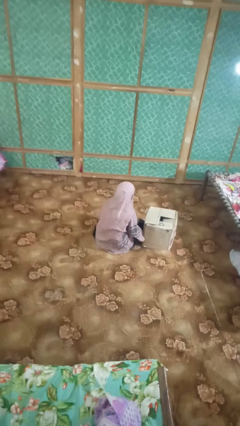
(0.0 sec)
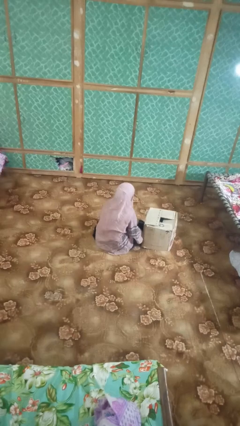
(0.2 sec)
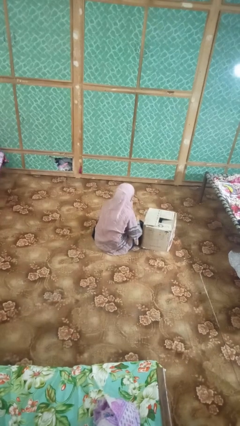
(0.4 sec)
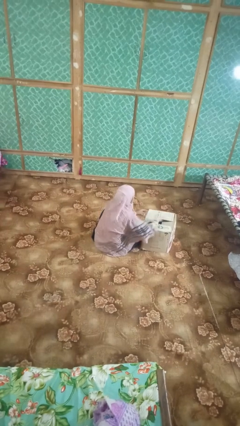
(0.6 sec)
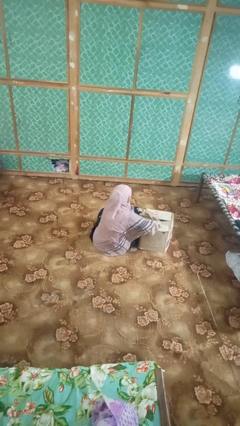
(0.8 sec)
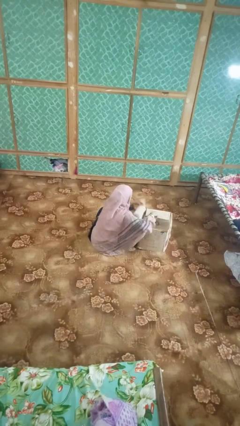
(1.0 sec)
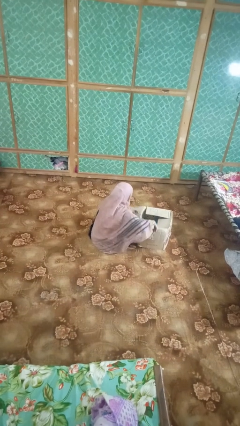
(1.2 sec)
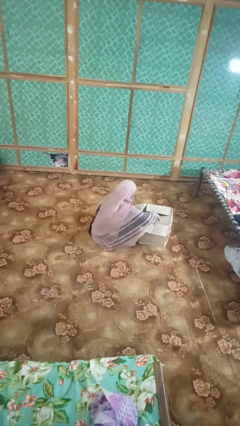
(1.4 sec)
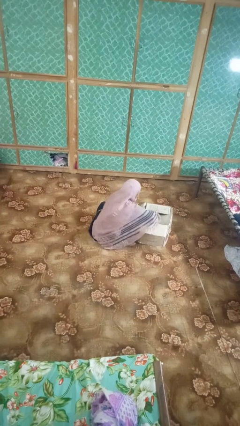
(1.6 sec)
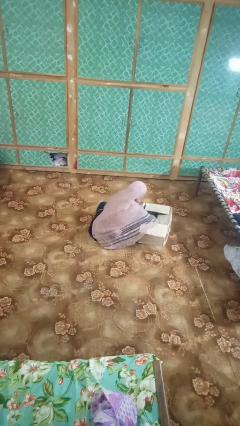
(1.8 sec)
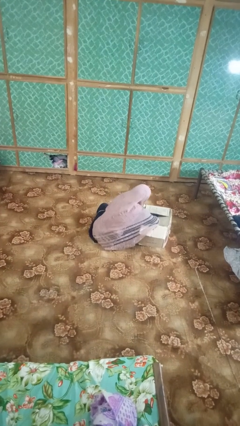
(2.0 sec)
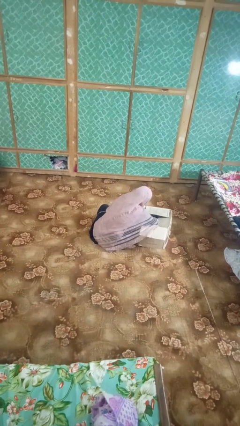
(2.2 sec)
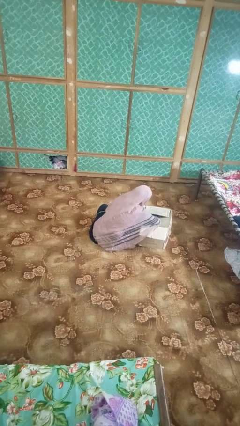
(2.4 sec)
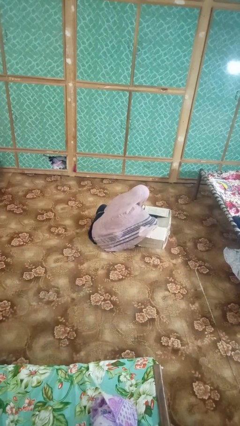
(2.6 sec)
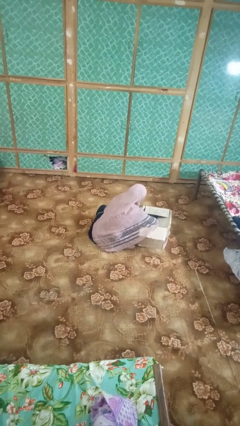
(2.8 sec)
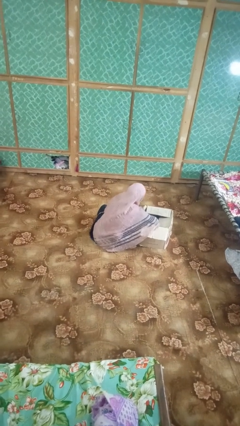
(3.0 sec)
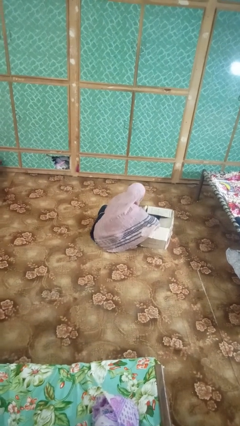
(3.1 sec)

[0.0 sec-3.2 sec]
person searches in box

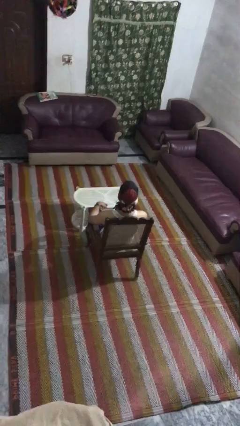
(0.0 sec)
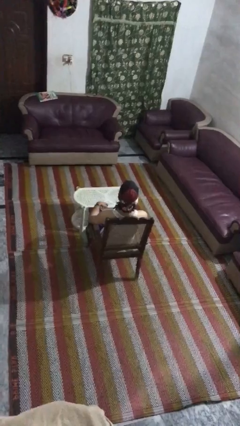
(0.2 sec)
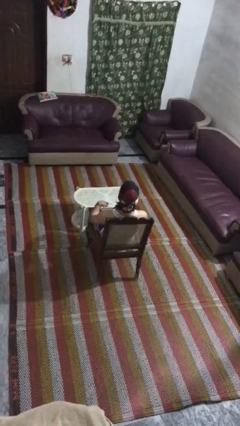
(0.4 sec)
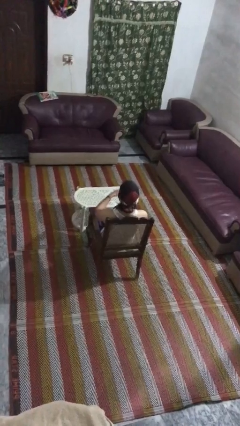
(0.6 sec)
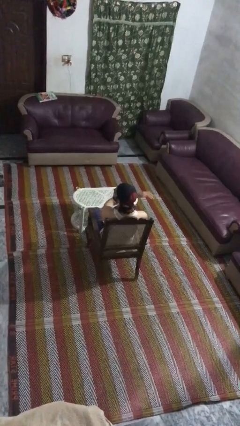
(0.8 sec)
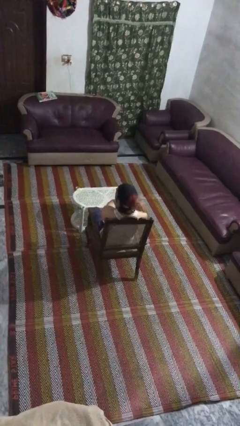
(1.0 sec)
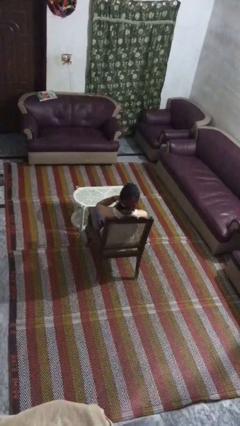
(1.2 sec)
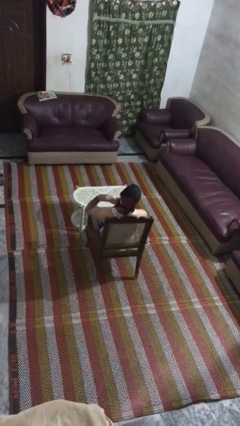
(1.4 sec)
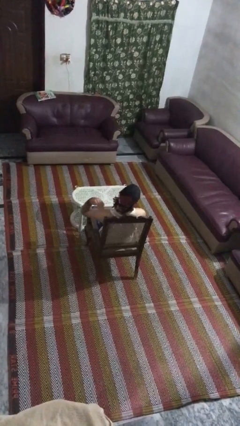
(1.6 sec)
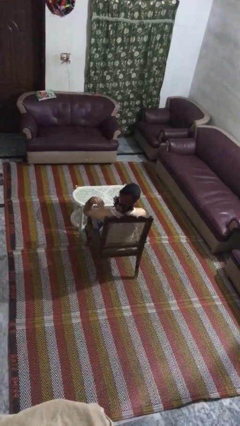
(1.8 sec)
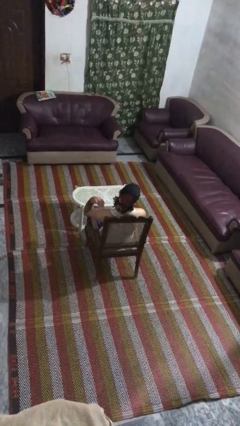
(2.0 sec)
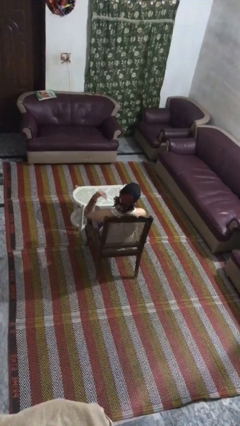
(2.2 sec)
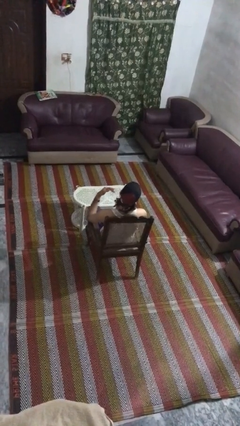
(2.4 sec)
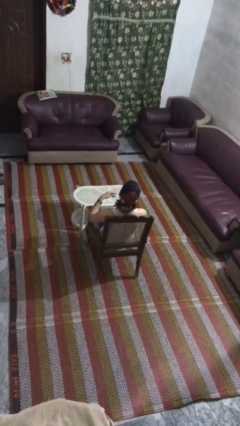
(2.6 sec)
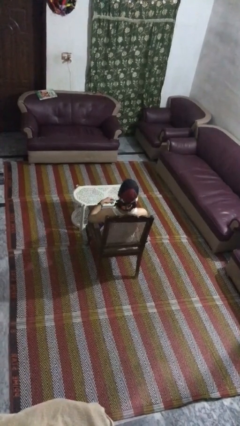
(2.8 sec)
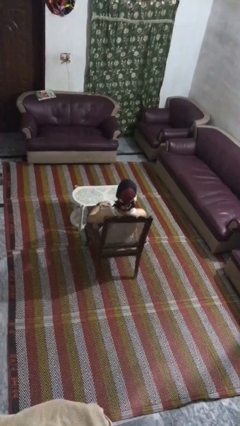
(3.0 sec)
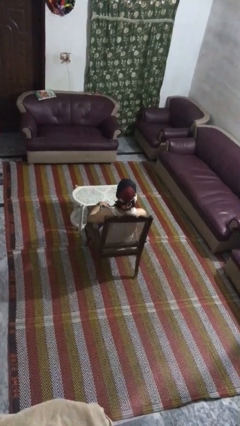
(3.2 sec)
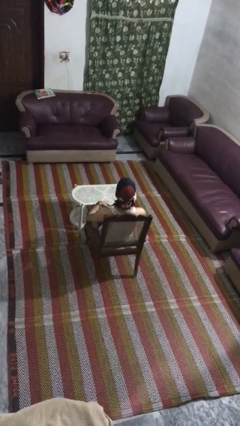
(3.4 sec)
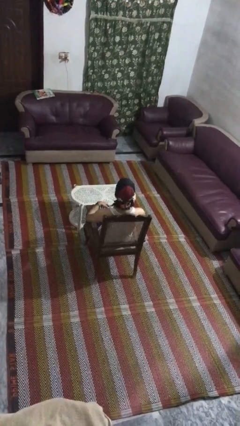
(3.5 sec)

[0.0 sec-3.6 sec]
person gestures cut

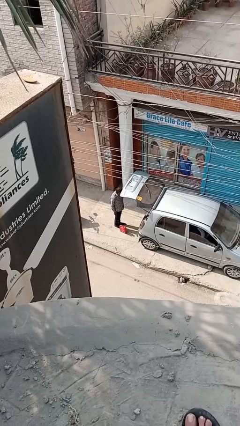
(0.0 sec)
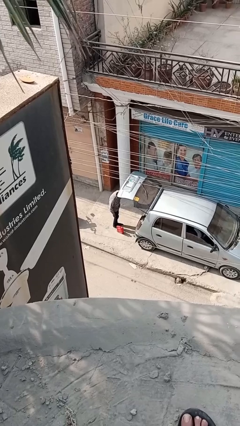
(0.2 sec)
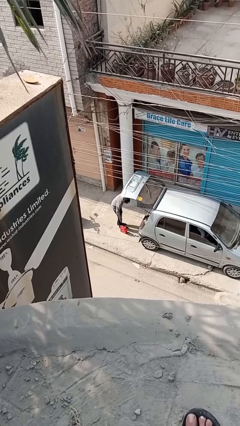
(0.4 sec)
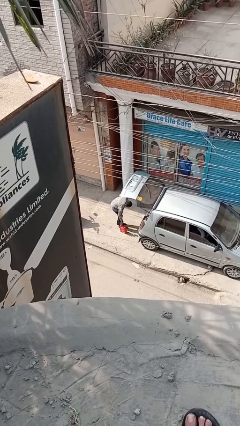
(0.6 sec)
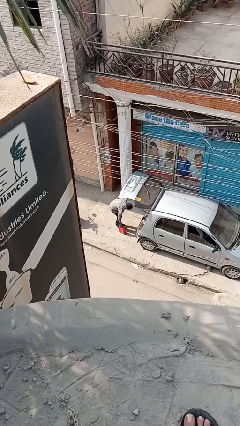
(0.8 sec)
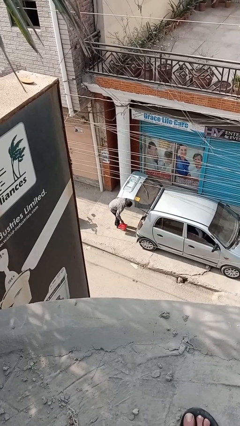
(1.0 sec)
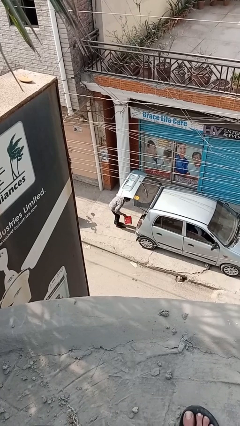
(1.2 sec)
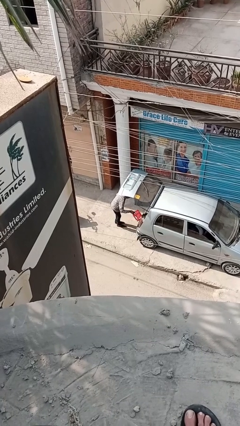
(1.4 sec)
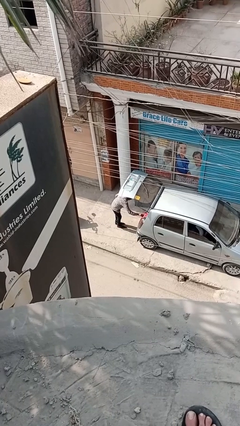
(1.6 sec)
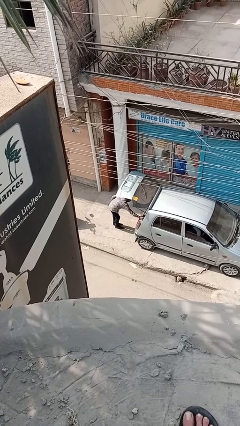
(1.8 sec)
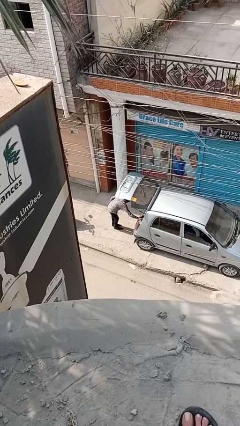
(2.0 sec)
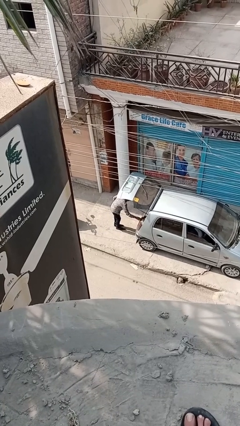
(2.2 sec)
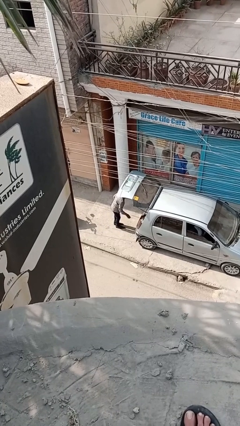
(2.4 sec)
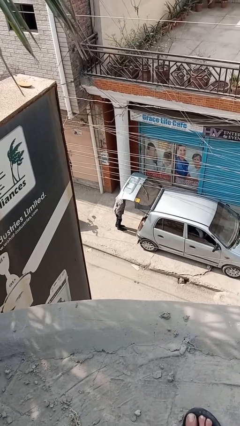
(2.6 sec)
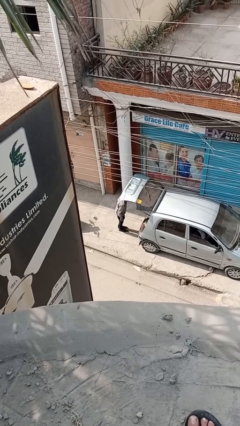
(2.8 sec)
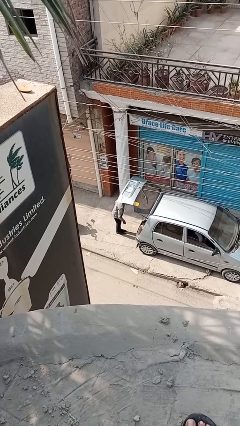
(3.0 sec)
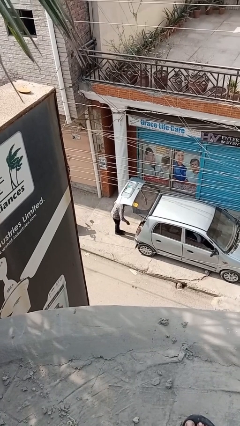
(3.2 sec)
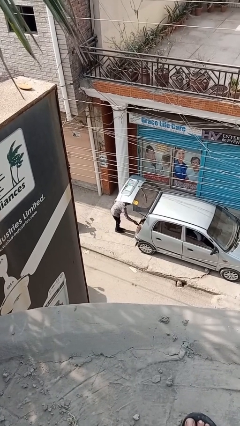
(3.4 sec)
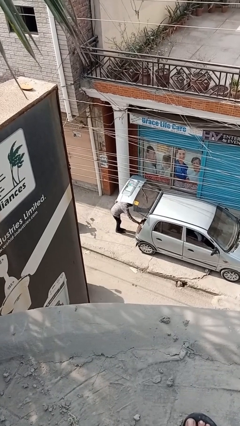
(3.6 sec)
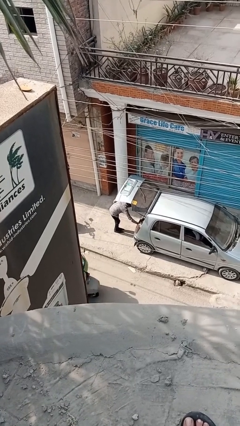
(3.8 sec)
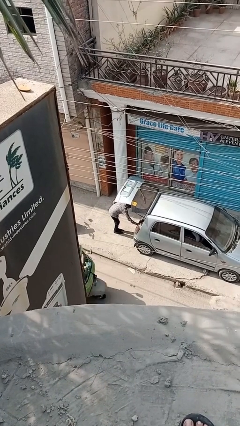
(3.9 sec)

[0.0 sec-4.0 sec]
person loads car

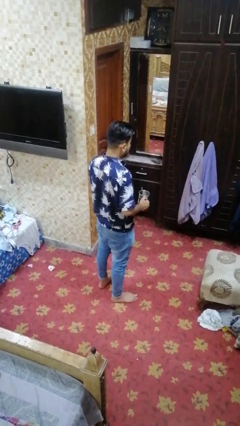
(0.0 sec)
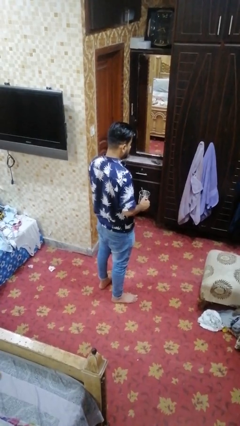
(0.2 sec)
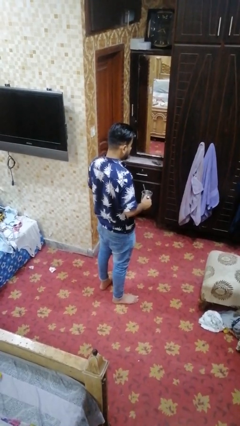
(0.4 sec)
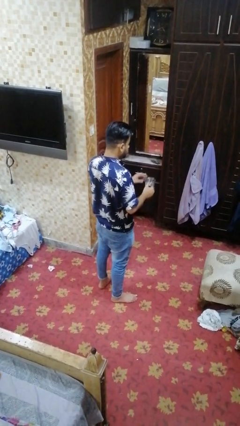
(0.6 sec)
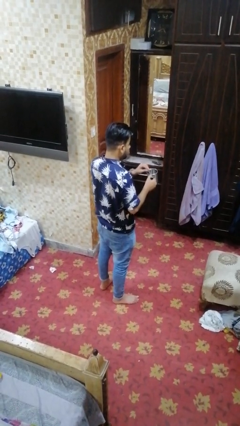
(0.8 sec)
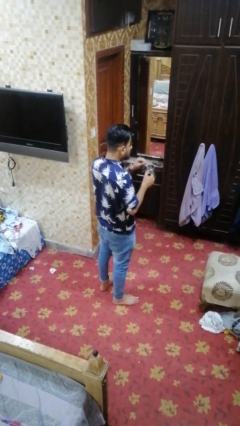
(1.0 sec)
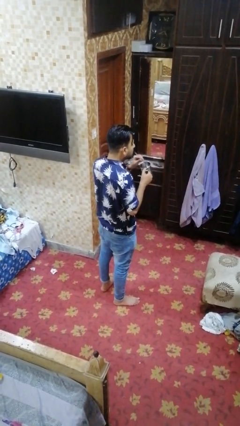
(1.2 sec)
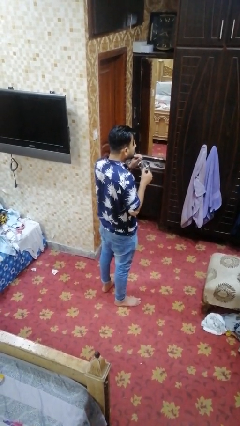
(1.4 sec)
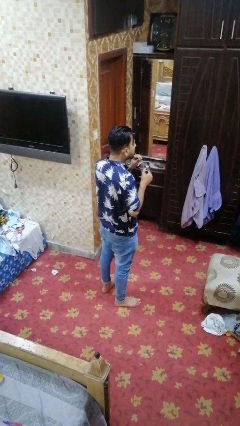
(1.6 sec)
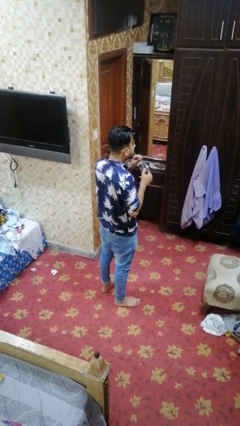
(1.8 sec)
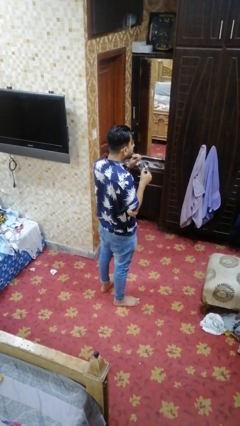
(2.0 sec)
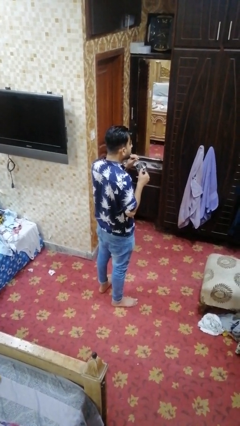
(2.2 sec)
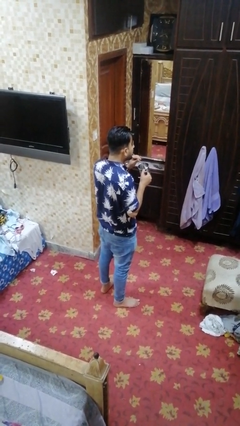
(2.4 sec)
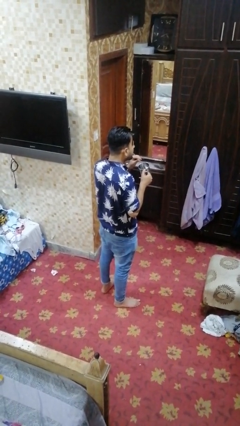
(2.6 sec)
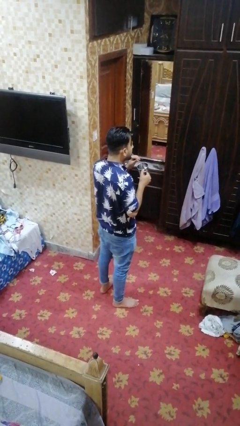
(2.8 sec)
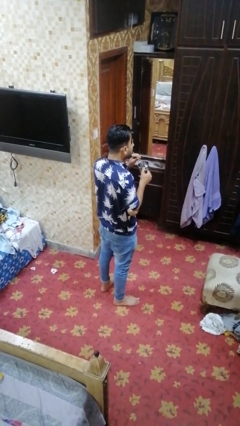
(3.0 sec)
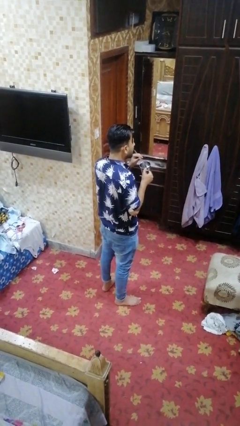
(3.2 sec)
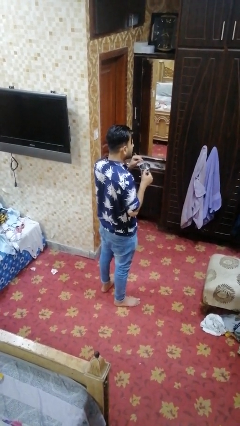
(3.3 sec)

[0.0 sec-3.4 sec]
person drinks from straw

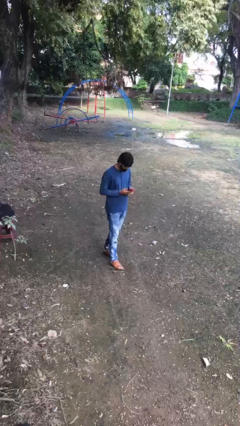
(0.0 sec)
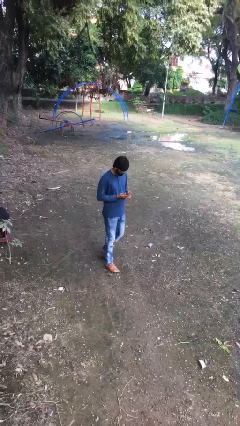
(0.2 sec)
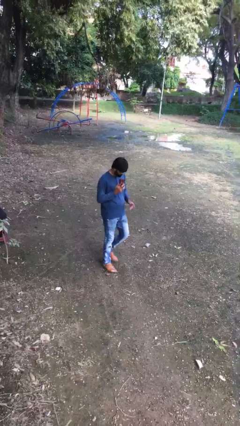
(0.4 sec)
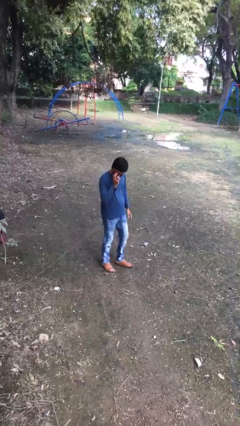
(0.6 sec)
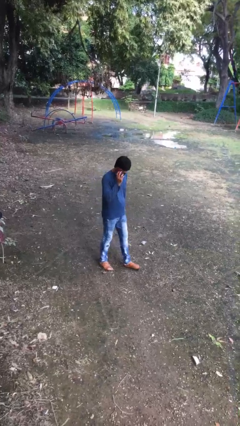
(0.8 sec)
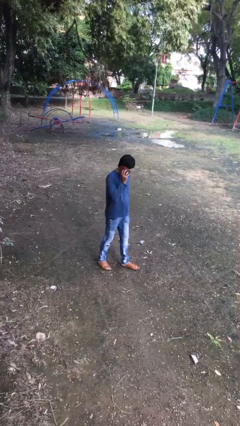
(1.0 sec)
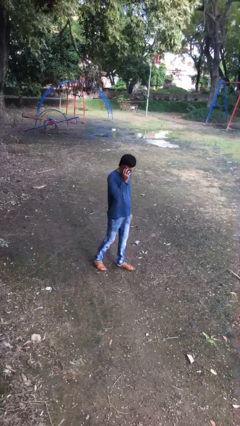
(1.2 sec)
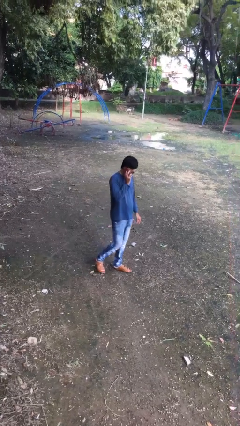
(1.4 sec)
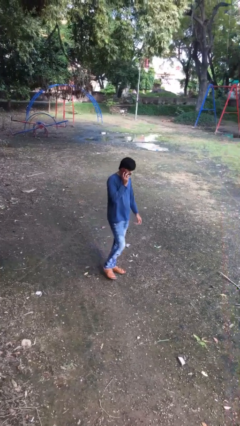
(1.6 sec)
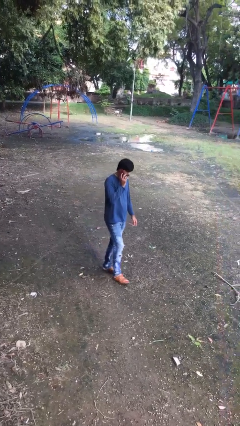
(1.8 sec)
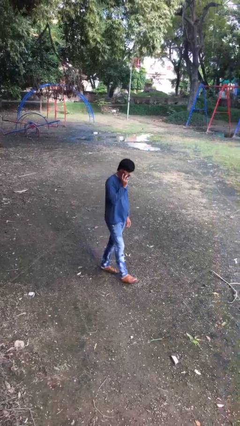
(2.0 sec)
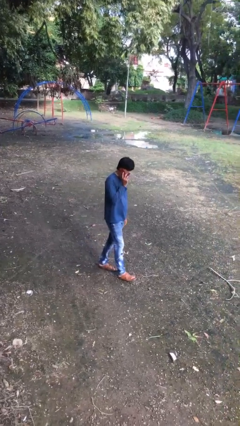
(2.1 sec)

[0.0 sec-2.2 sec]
person talks on phone

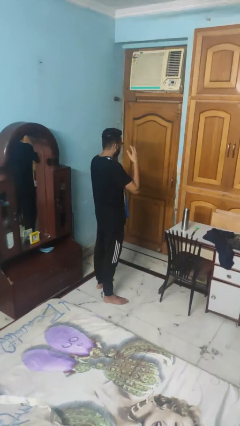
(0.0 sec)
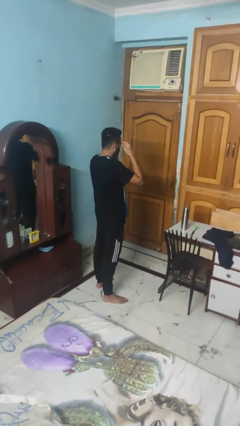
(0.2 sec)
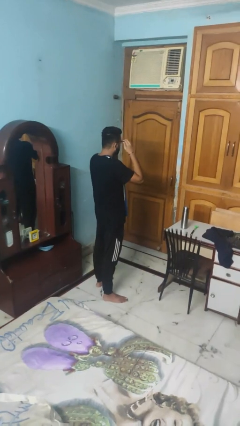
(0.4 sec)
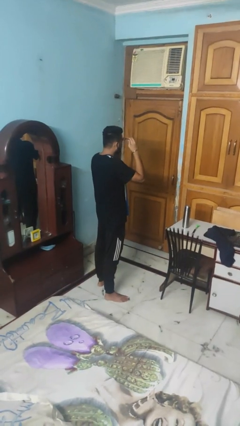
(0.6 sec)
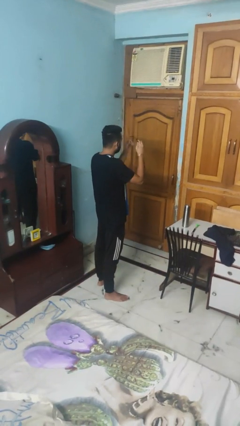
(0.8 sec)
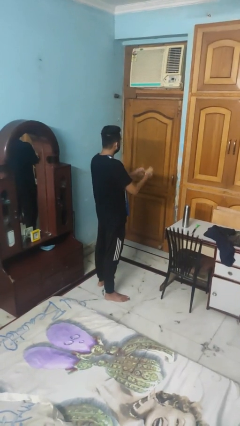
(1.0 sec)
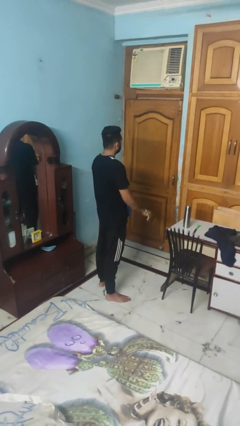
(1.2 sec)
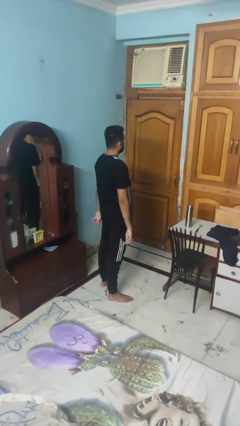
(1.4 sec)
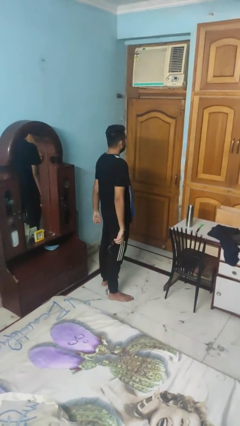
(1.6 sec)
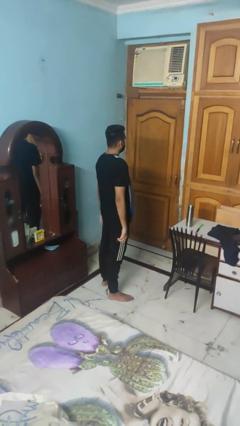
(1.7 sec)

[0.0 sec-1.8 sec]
person takes off glasses
